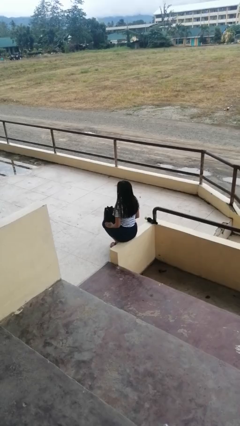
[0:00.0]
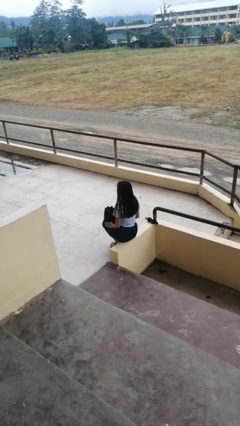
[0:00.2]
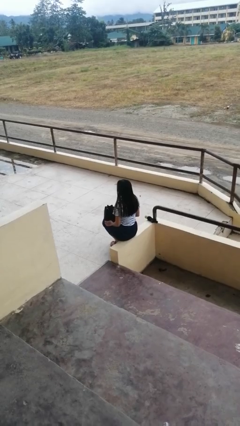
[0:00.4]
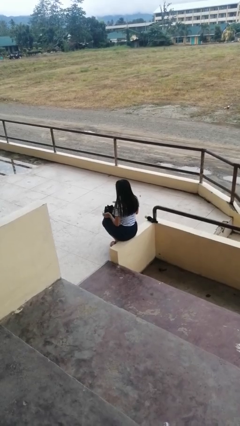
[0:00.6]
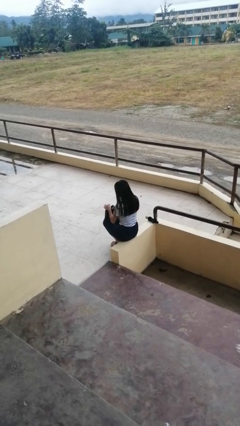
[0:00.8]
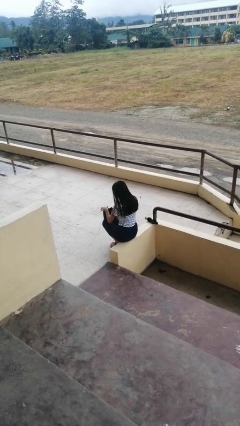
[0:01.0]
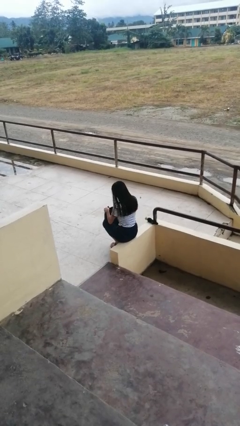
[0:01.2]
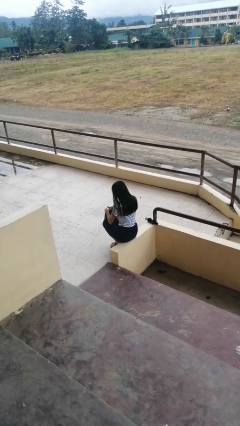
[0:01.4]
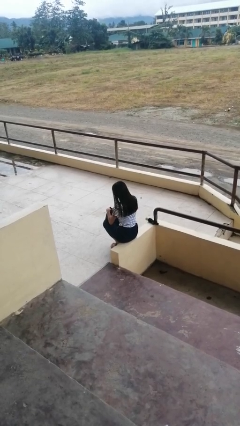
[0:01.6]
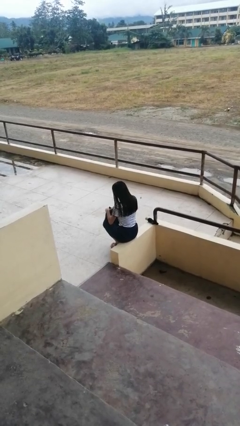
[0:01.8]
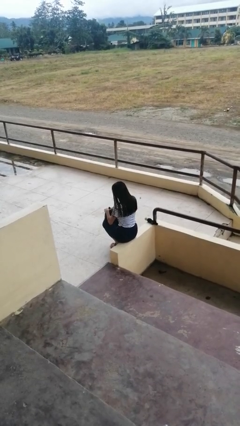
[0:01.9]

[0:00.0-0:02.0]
person searches in bag

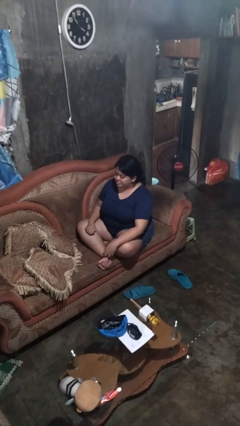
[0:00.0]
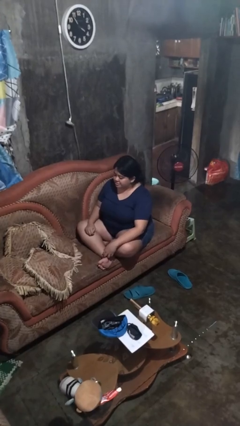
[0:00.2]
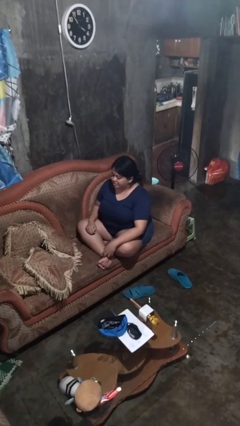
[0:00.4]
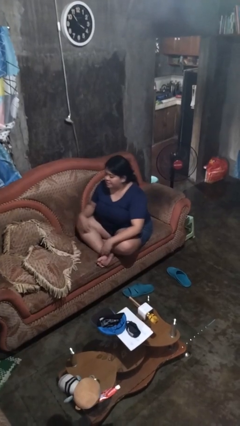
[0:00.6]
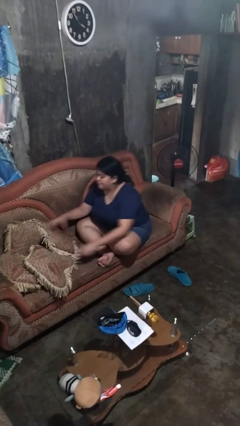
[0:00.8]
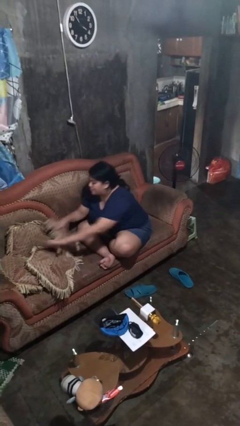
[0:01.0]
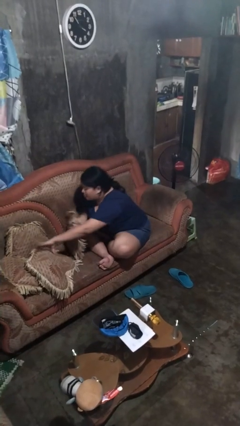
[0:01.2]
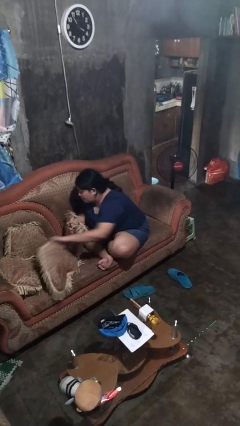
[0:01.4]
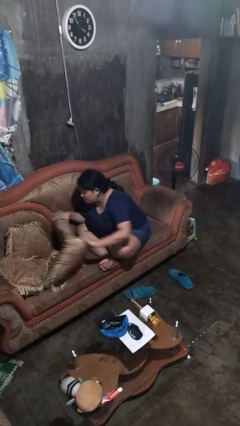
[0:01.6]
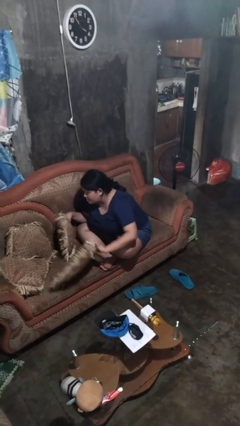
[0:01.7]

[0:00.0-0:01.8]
person searches in couch

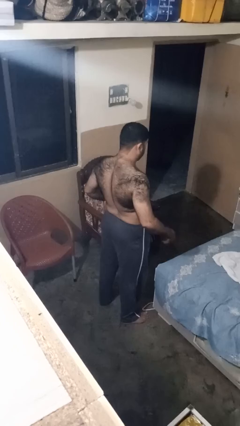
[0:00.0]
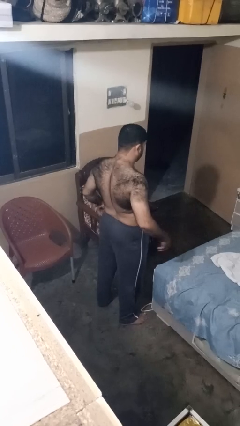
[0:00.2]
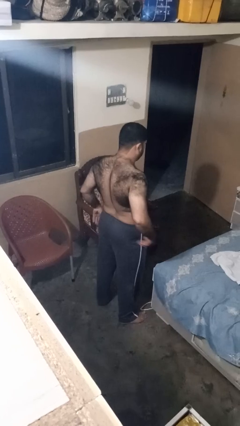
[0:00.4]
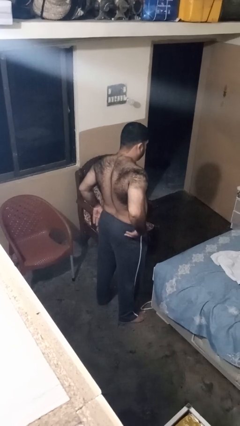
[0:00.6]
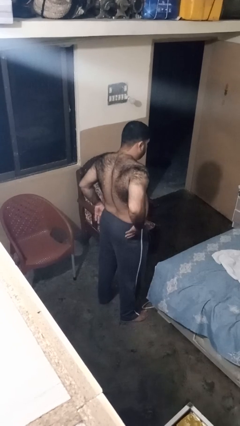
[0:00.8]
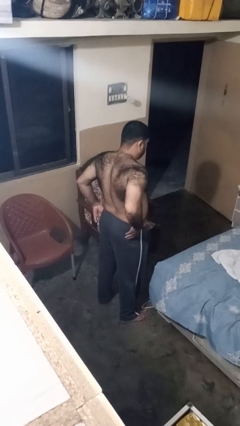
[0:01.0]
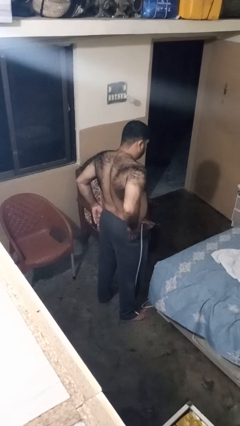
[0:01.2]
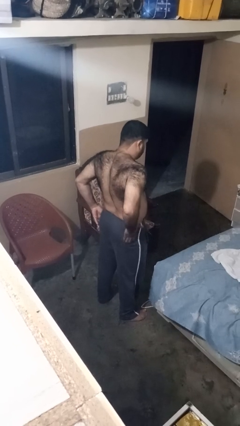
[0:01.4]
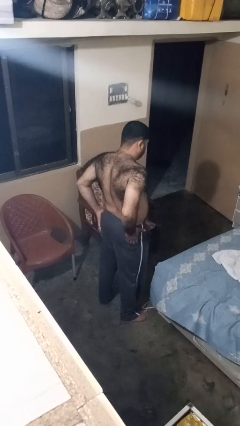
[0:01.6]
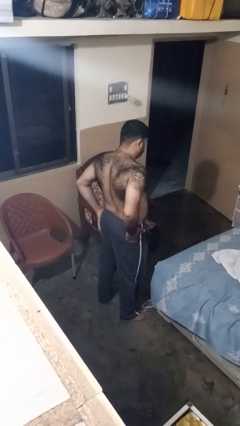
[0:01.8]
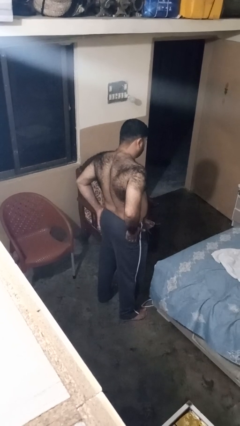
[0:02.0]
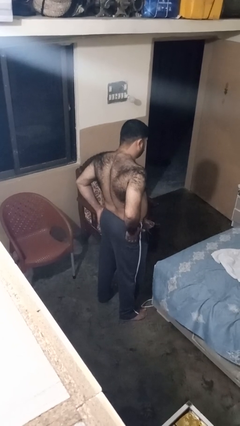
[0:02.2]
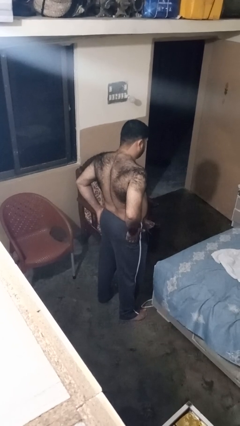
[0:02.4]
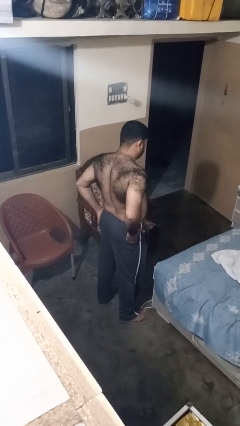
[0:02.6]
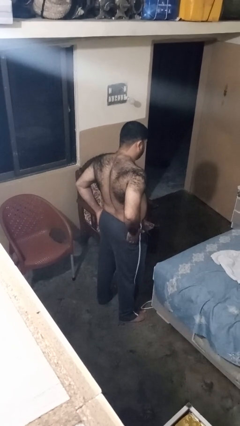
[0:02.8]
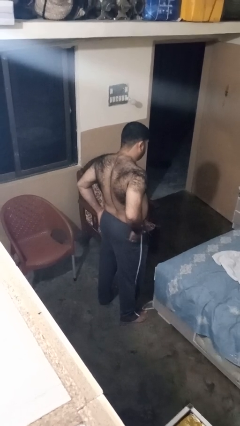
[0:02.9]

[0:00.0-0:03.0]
person puts hands in back pockets

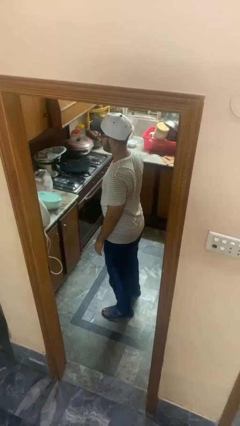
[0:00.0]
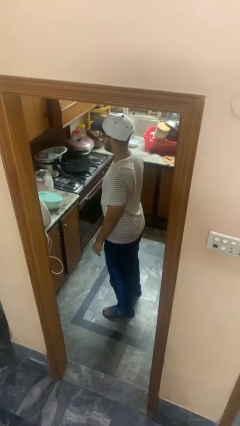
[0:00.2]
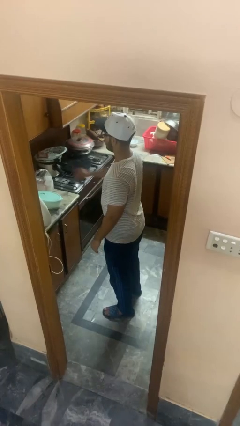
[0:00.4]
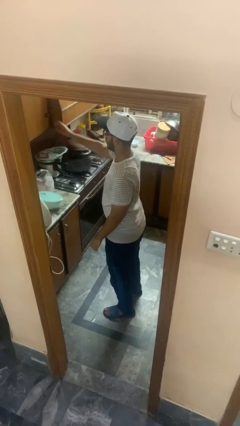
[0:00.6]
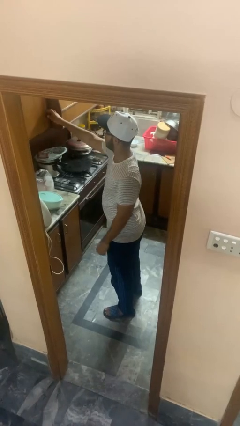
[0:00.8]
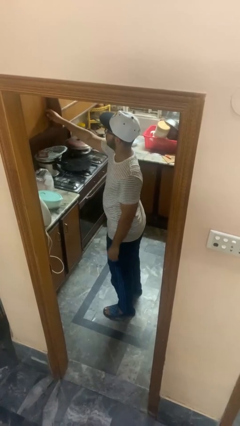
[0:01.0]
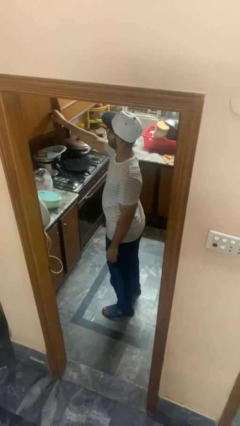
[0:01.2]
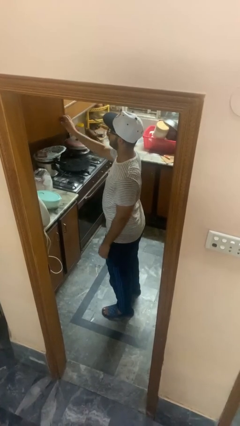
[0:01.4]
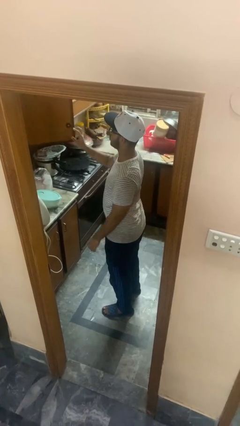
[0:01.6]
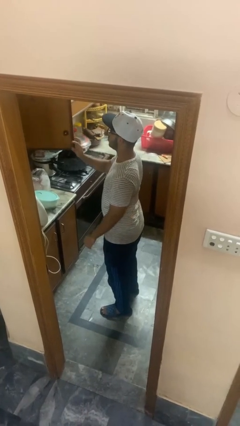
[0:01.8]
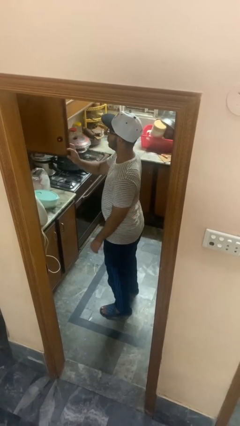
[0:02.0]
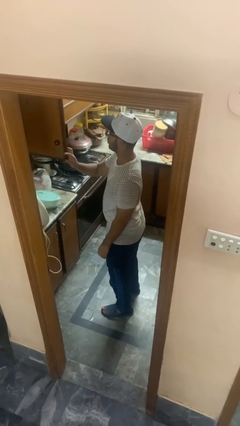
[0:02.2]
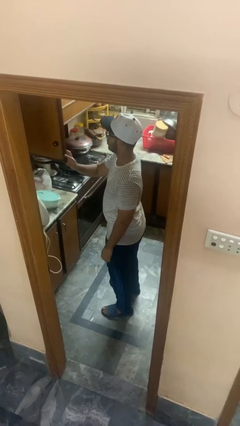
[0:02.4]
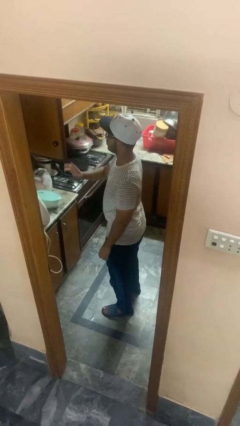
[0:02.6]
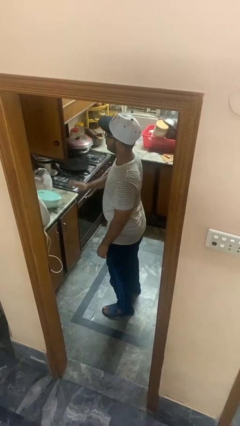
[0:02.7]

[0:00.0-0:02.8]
person opens kitchen drawer

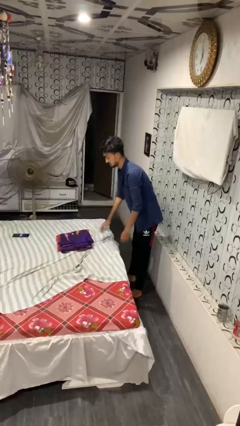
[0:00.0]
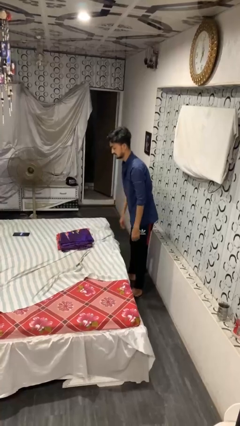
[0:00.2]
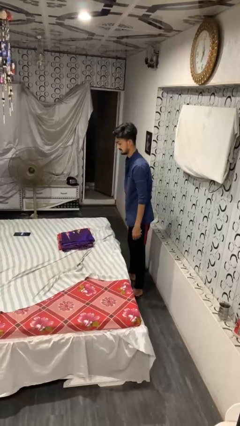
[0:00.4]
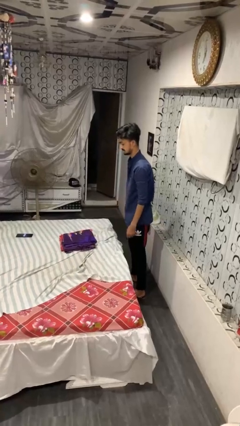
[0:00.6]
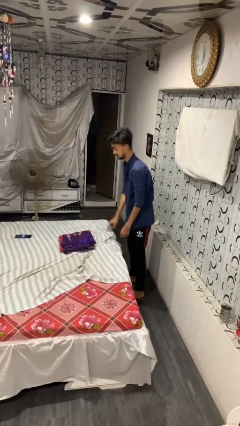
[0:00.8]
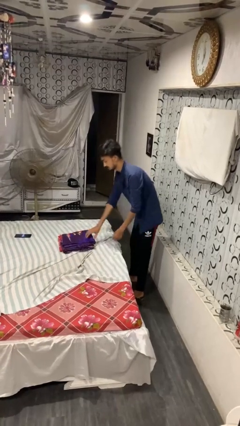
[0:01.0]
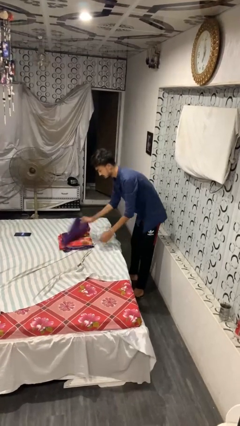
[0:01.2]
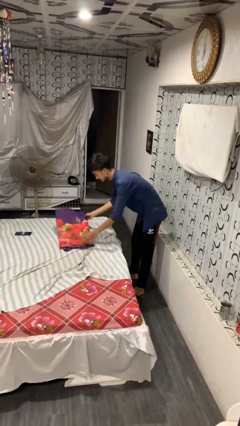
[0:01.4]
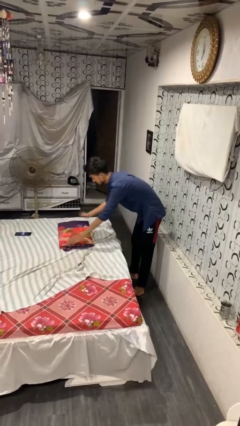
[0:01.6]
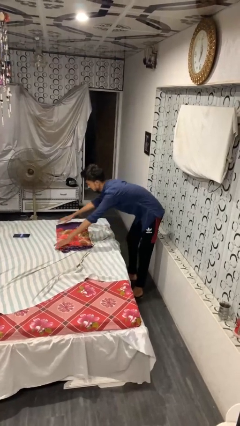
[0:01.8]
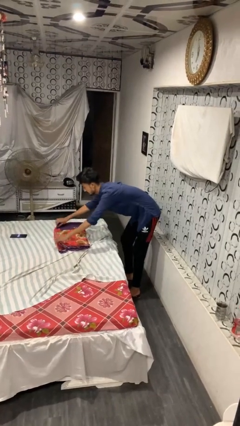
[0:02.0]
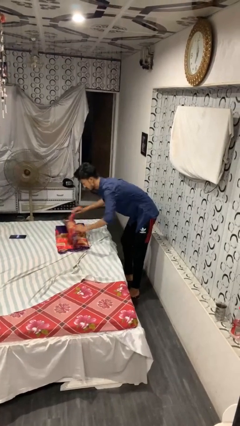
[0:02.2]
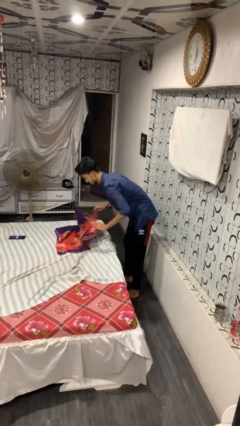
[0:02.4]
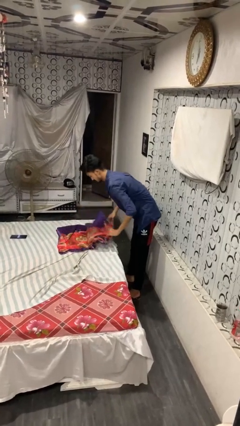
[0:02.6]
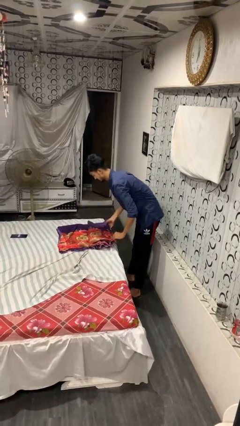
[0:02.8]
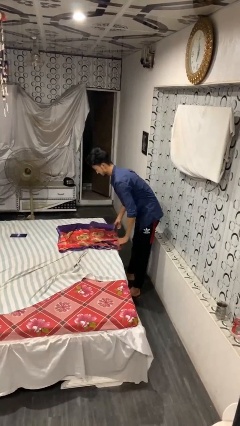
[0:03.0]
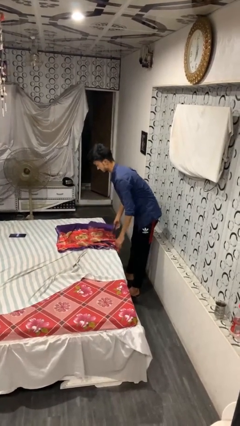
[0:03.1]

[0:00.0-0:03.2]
person unfolds blanket

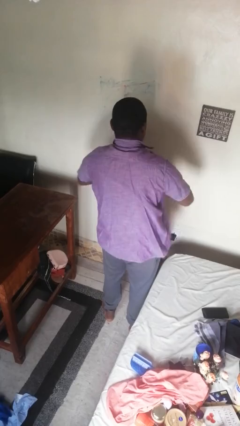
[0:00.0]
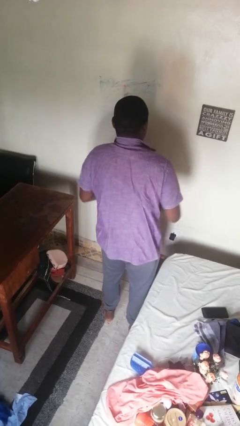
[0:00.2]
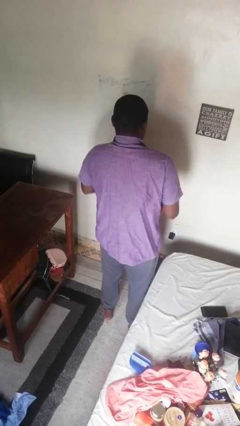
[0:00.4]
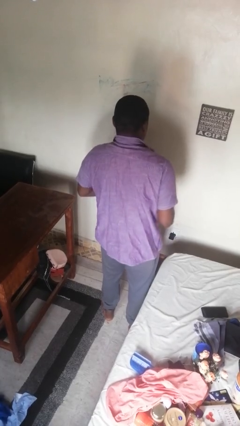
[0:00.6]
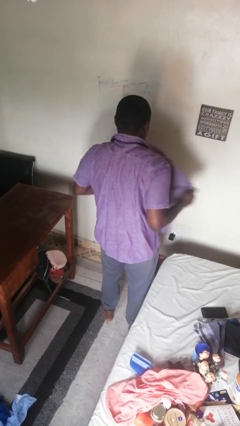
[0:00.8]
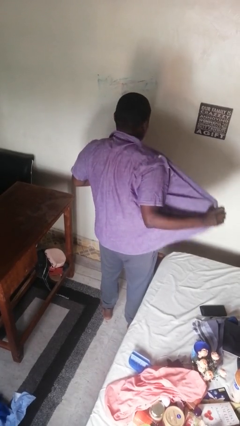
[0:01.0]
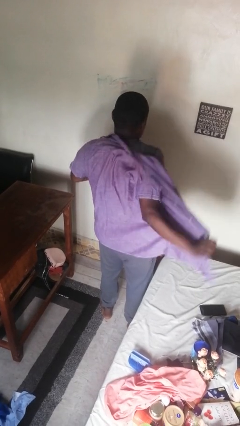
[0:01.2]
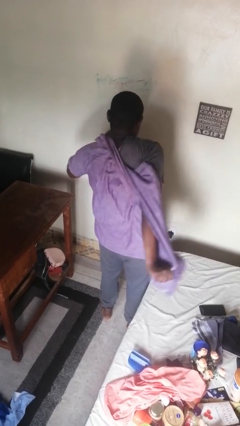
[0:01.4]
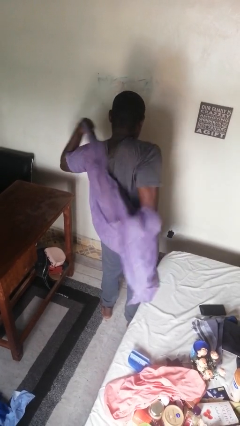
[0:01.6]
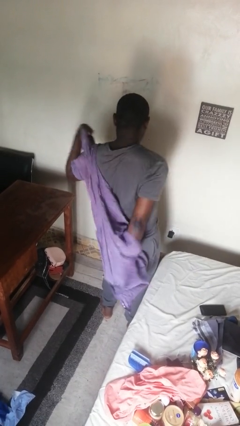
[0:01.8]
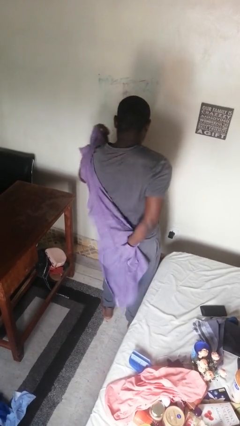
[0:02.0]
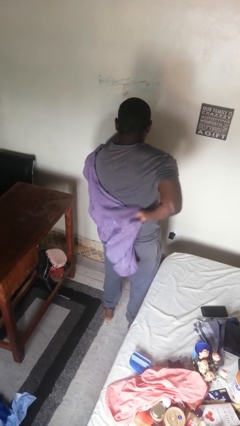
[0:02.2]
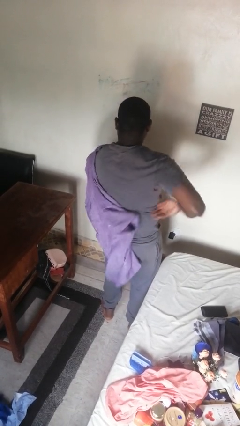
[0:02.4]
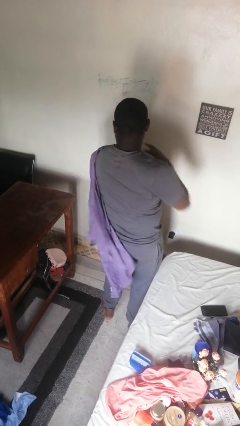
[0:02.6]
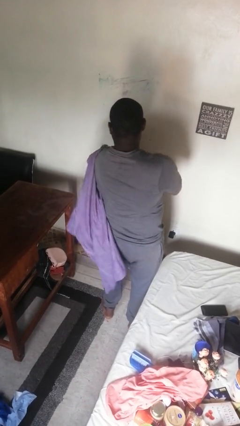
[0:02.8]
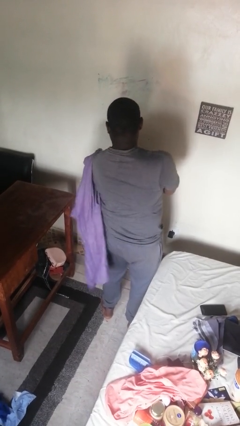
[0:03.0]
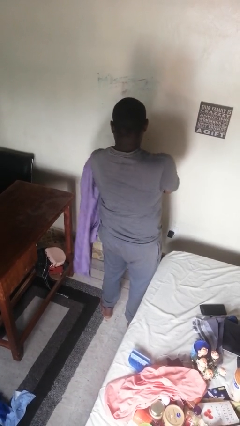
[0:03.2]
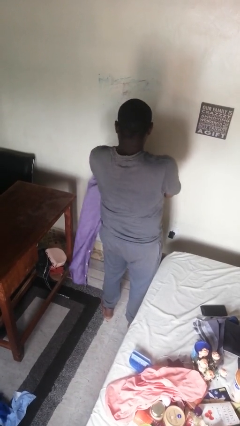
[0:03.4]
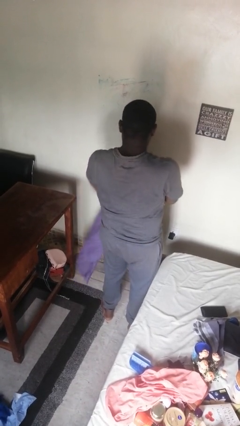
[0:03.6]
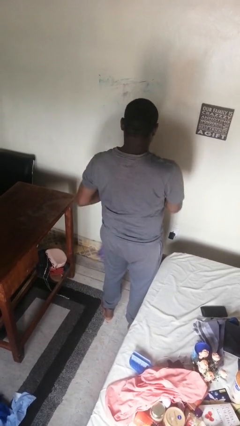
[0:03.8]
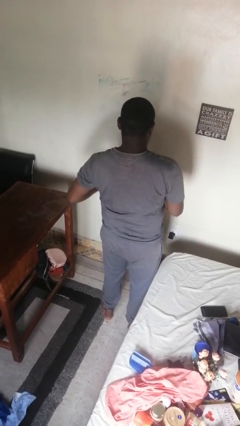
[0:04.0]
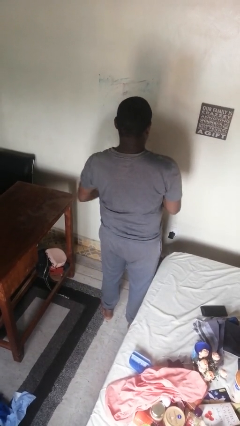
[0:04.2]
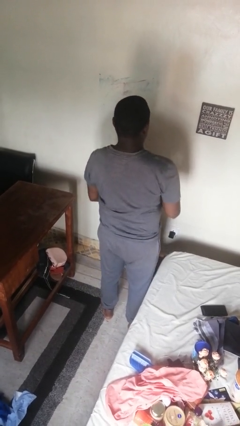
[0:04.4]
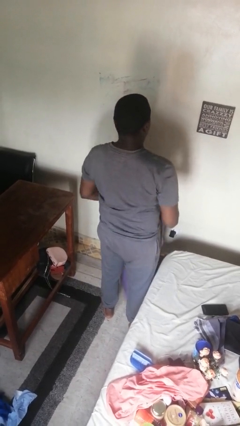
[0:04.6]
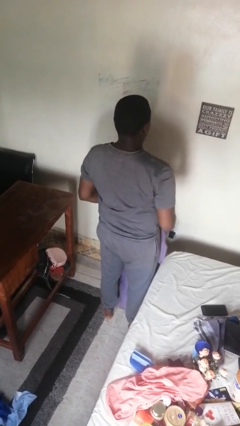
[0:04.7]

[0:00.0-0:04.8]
person takes off shirt
